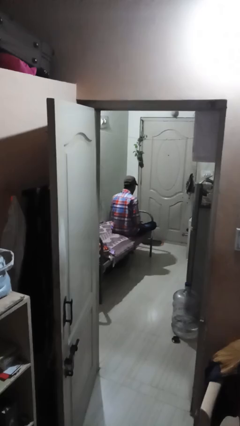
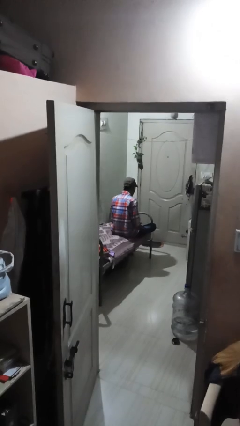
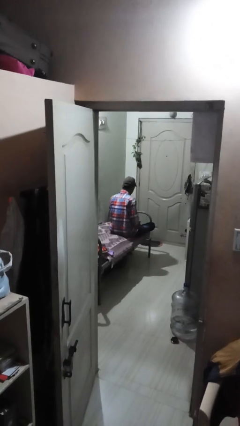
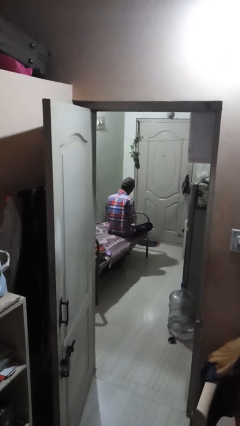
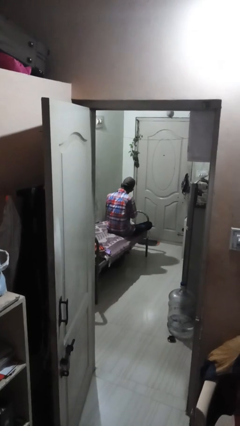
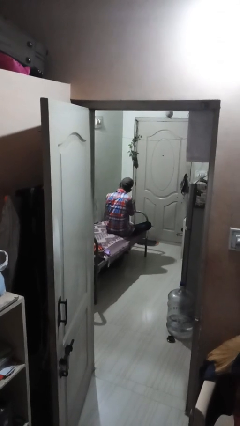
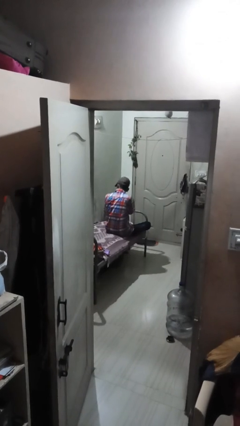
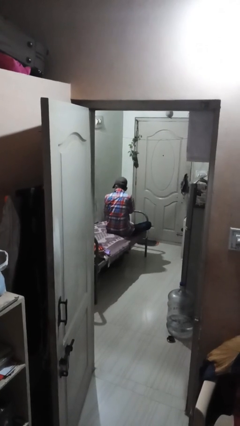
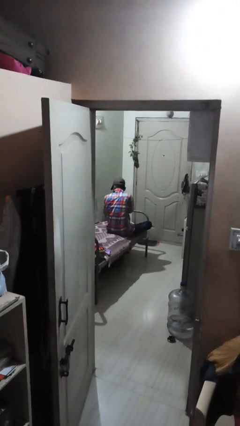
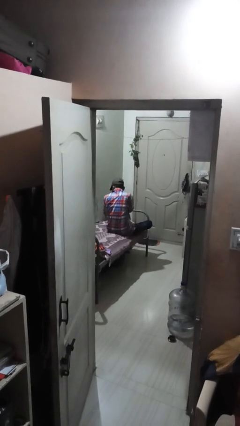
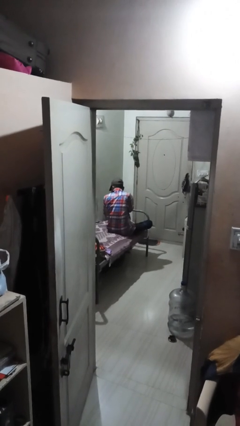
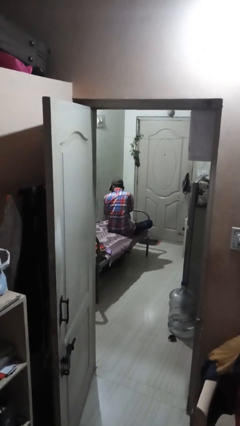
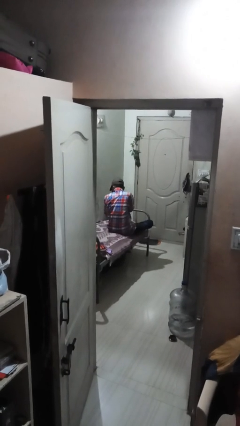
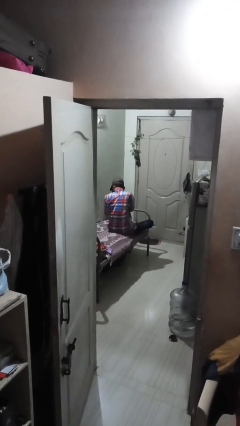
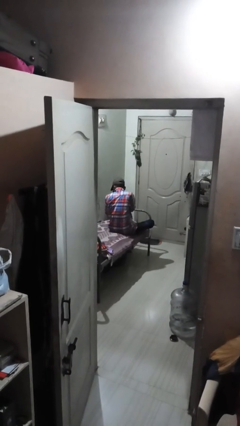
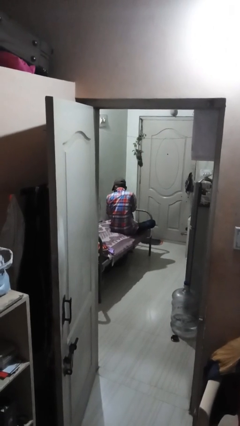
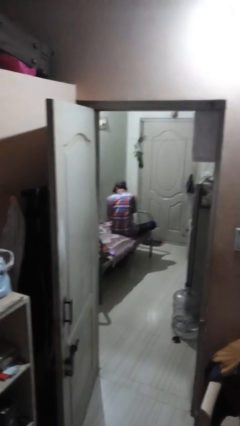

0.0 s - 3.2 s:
person prays

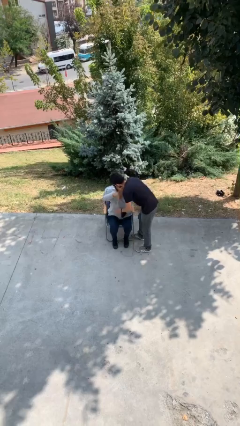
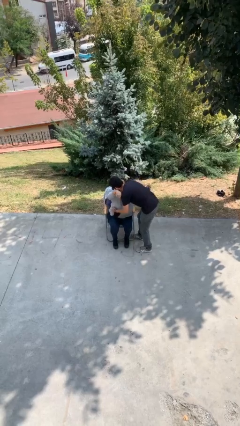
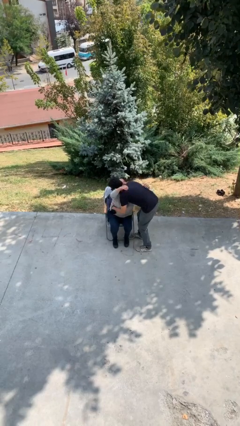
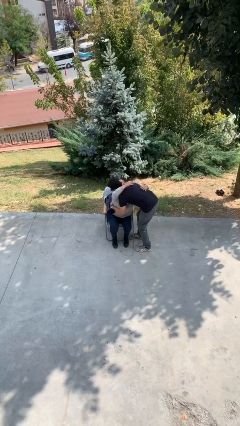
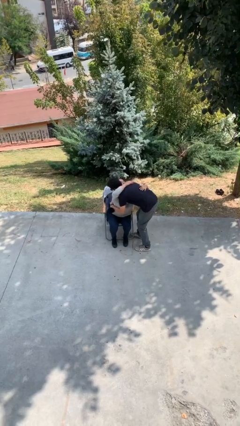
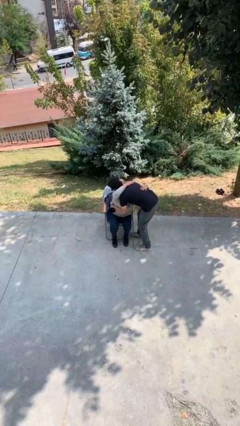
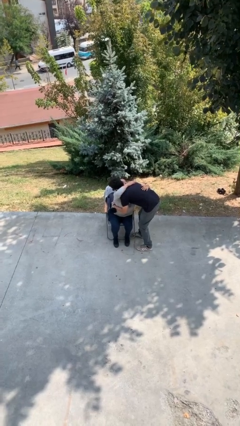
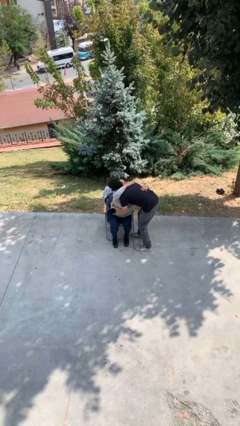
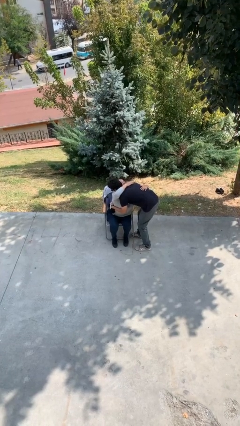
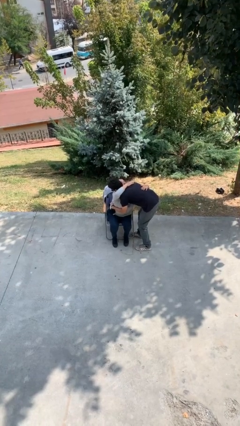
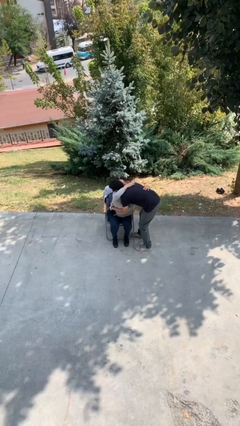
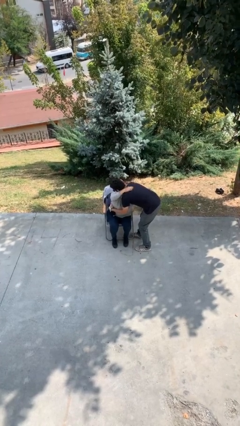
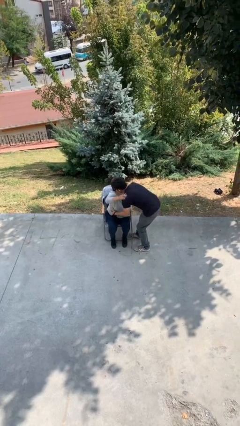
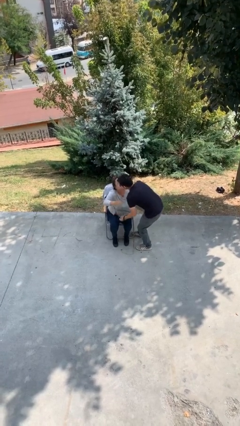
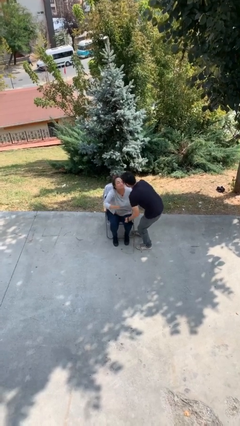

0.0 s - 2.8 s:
person embraces person

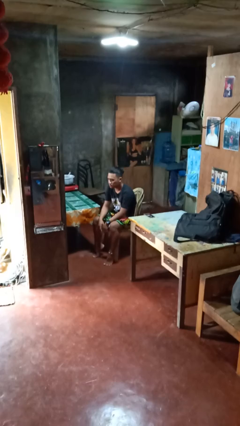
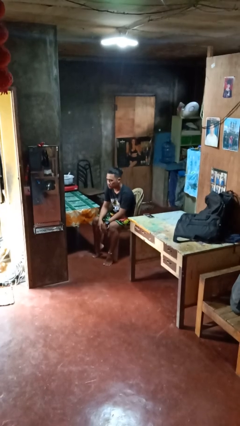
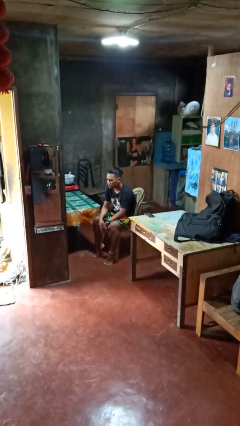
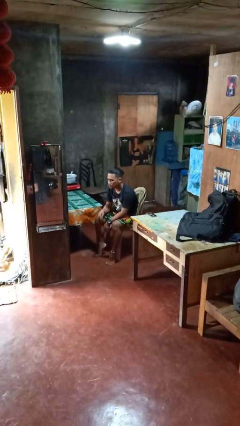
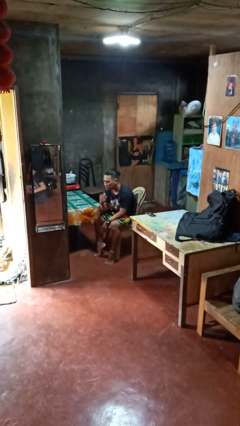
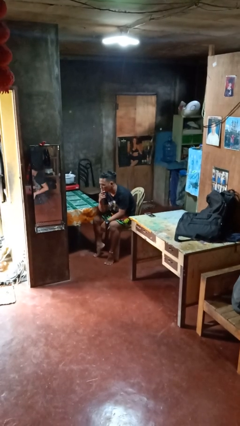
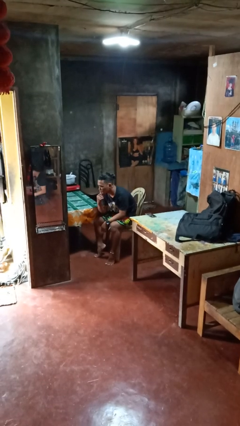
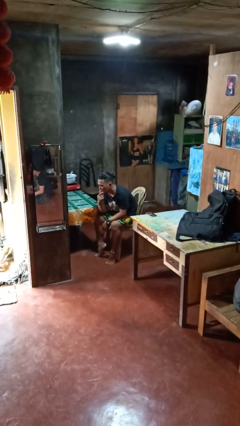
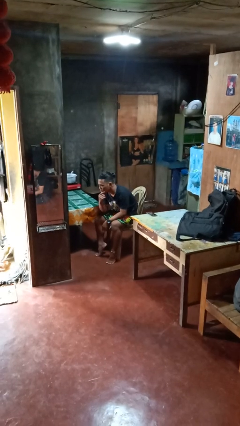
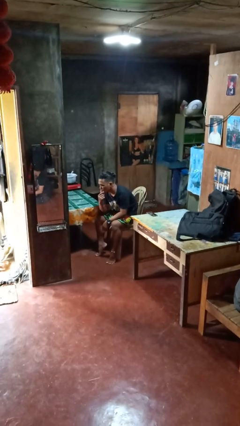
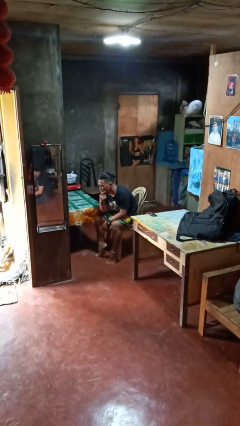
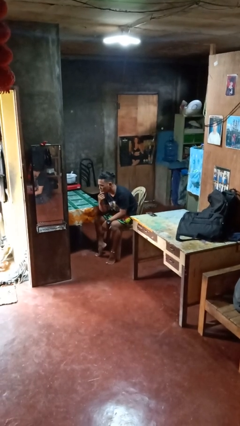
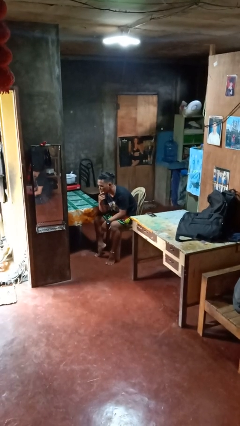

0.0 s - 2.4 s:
person strokes chin

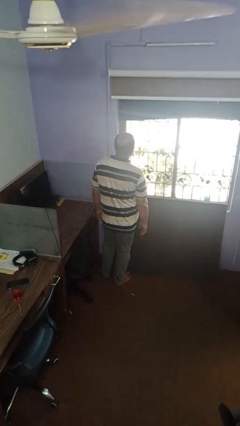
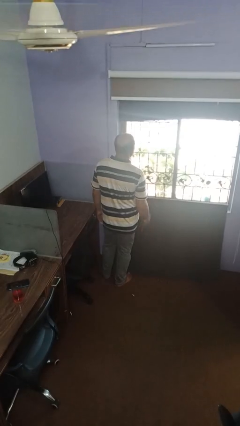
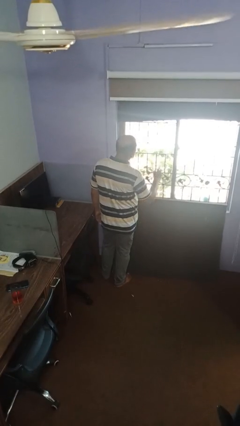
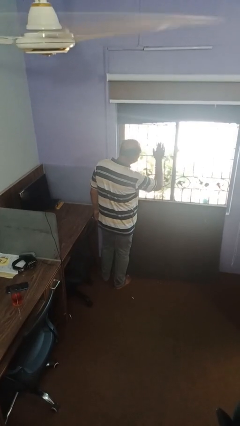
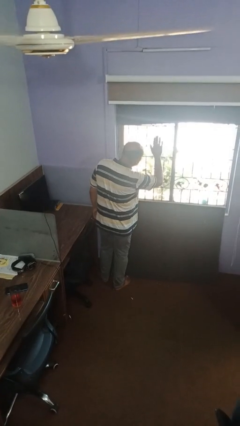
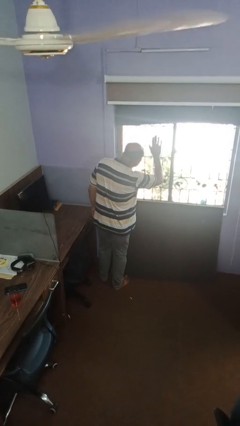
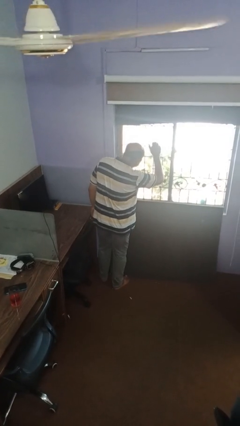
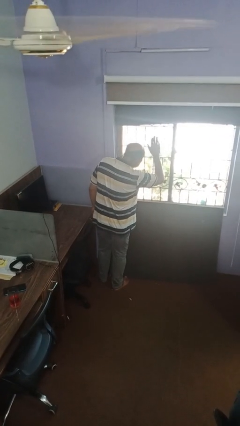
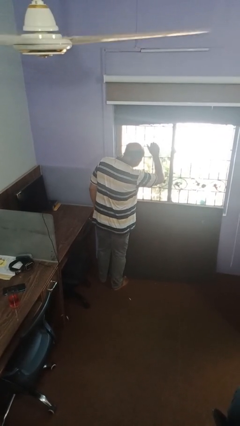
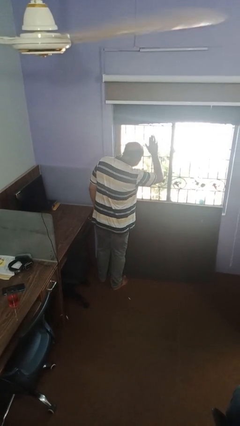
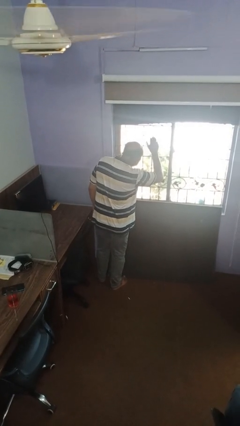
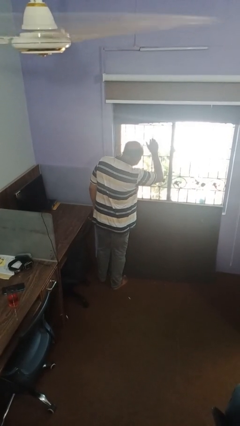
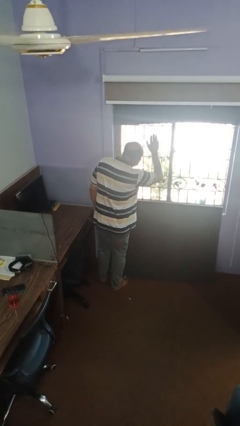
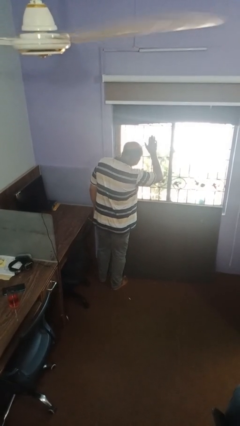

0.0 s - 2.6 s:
person gestures come here

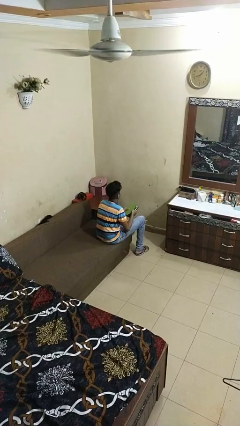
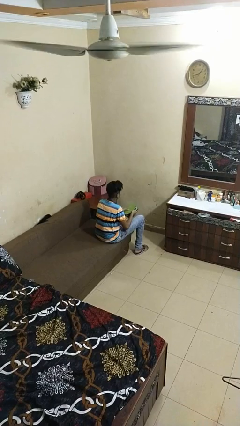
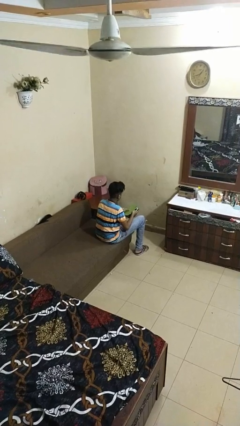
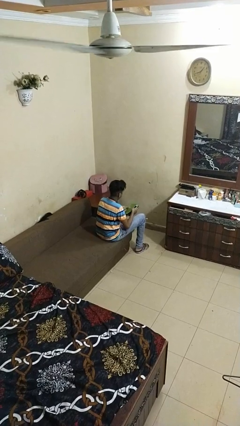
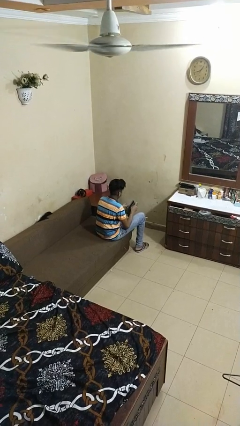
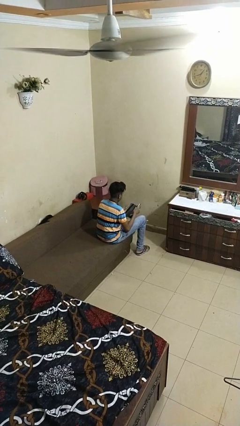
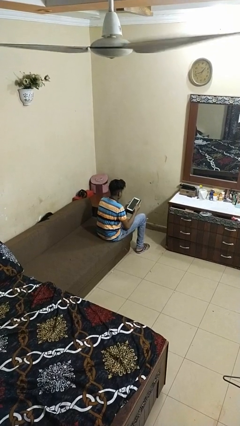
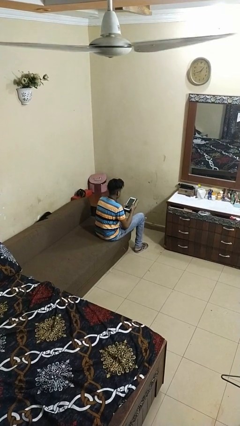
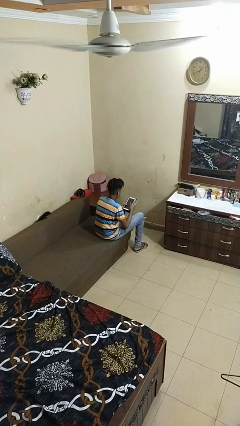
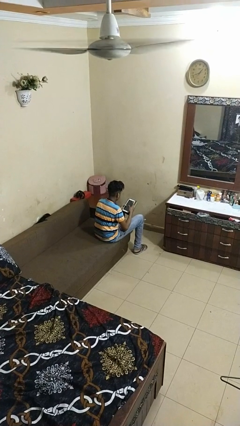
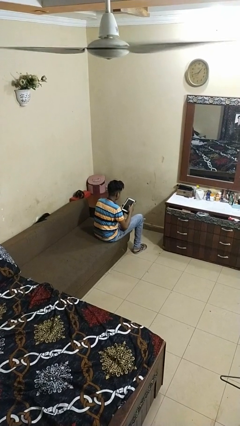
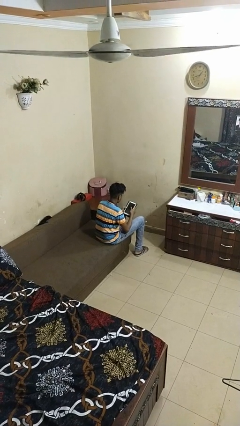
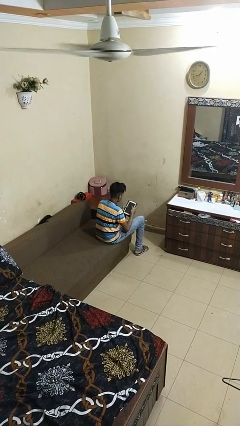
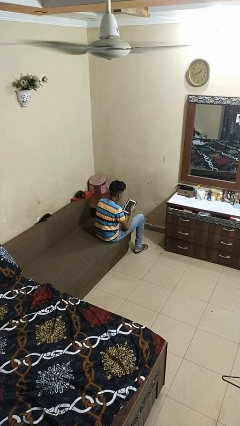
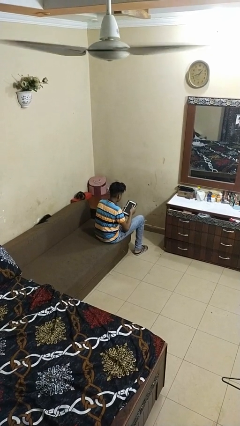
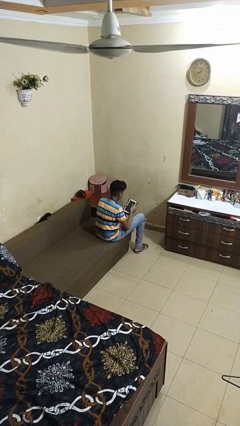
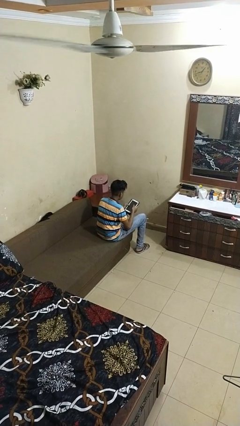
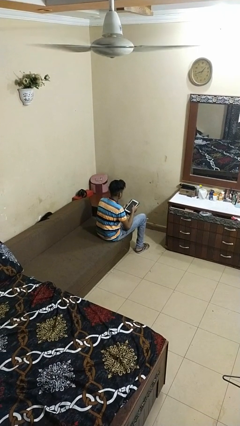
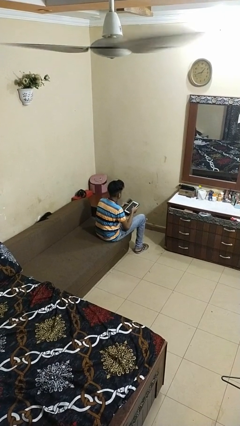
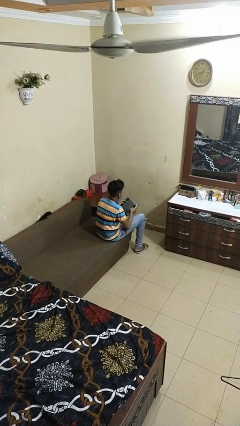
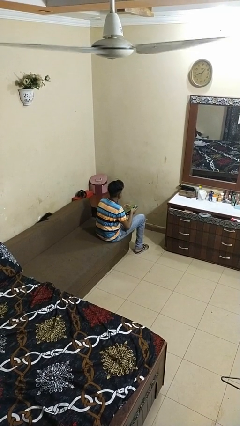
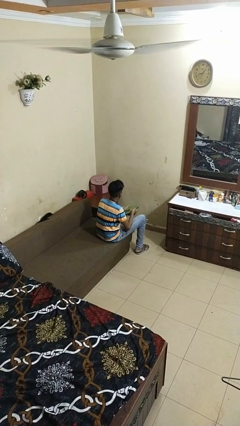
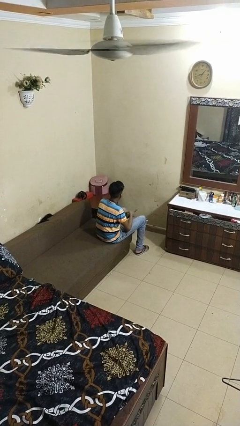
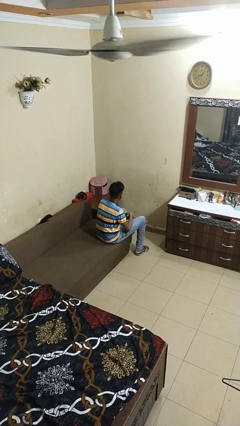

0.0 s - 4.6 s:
person interacts with tablet

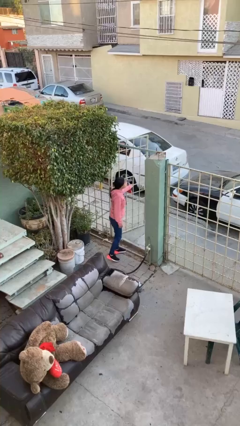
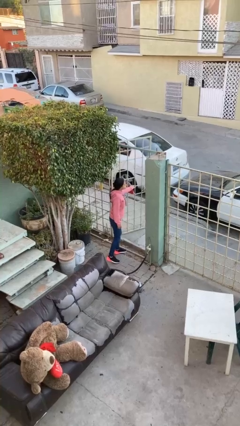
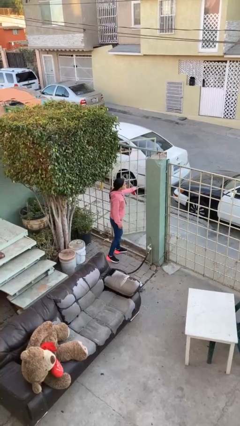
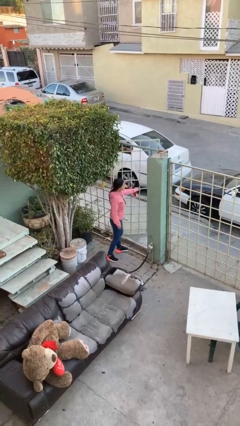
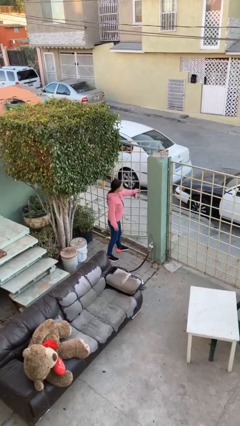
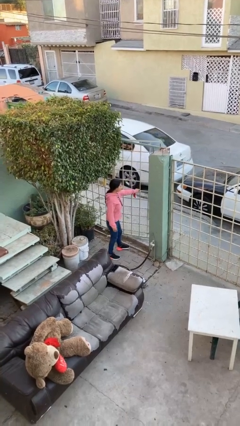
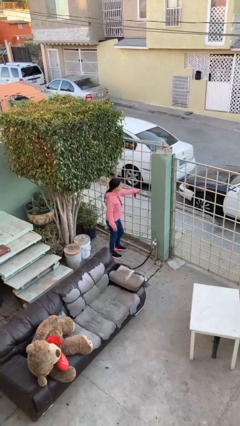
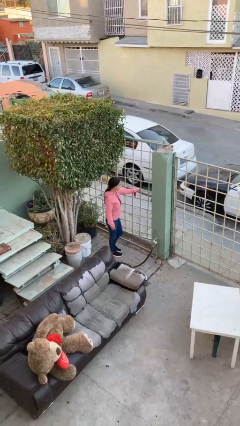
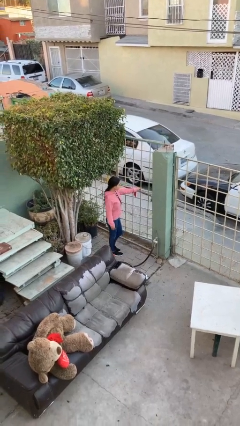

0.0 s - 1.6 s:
person closes facility door
